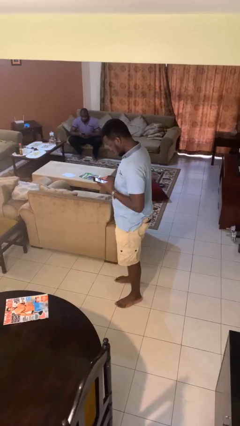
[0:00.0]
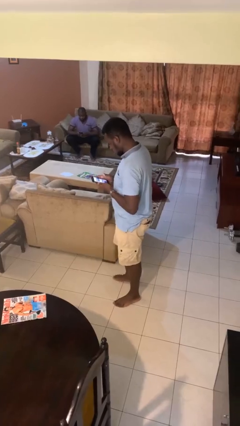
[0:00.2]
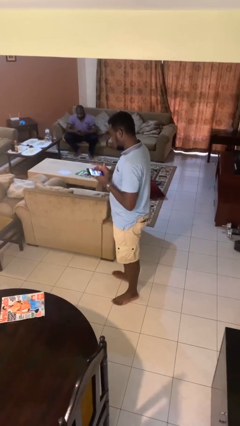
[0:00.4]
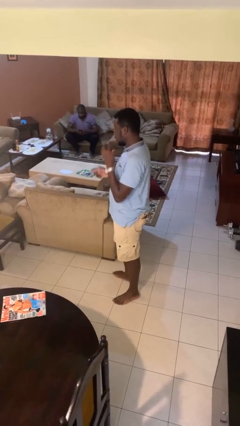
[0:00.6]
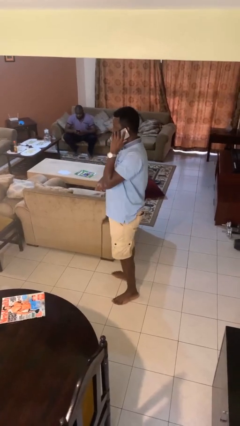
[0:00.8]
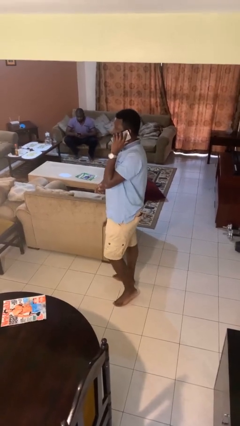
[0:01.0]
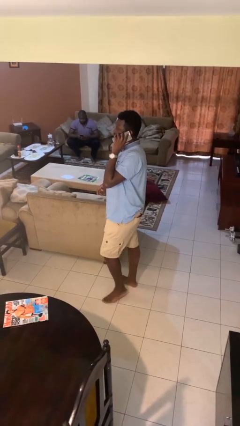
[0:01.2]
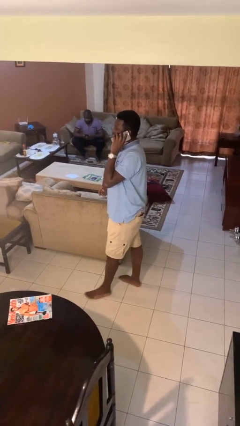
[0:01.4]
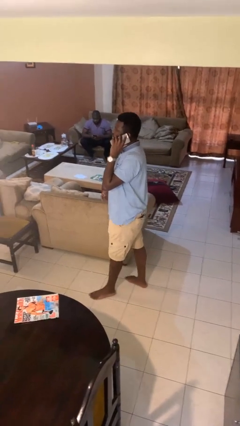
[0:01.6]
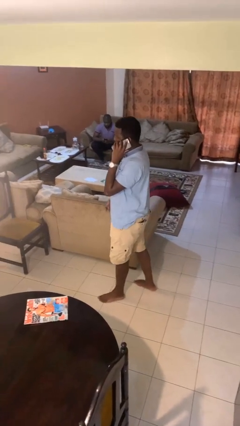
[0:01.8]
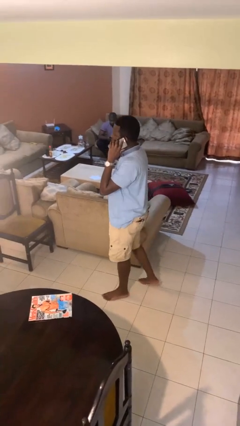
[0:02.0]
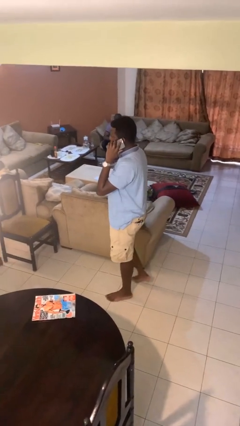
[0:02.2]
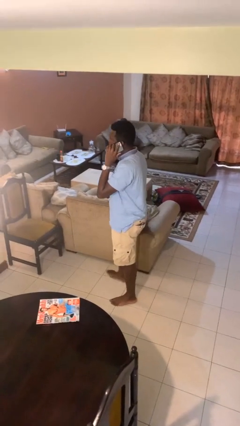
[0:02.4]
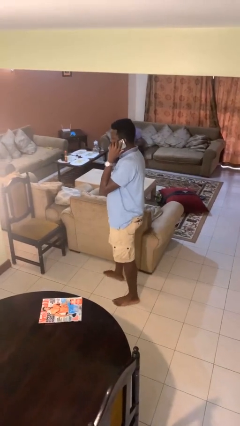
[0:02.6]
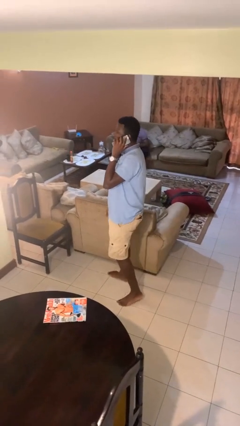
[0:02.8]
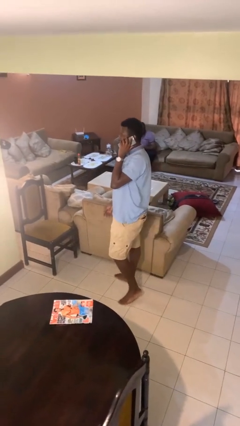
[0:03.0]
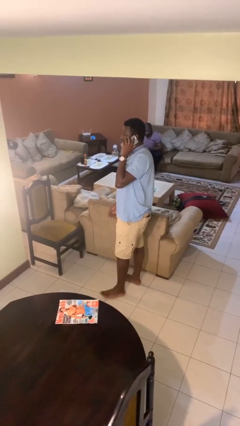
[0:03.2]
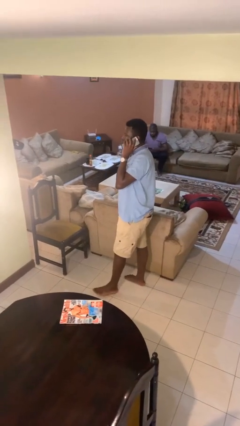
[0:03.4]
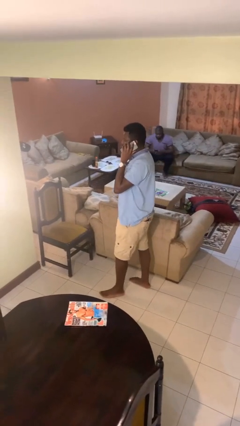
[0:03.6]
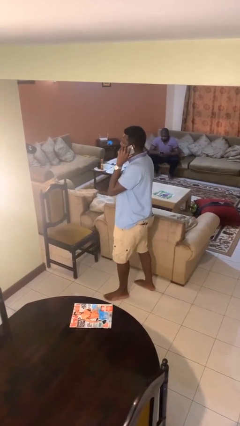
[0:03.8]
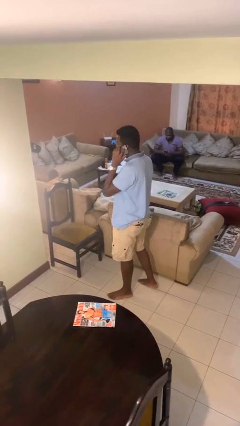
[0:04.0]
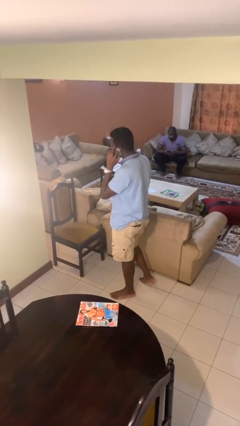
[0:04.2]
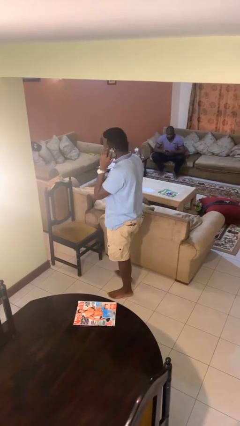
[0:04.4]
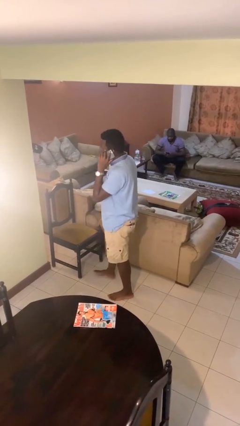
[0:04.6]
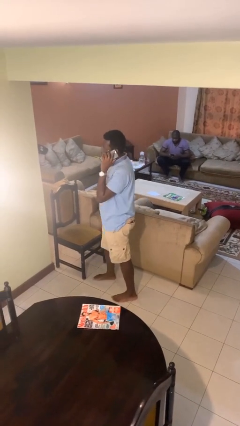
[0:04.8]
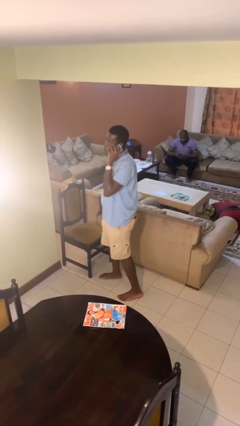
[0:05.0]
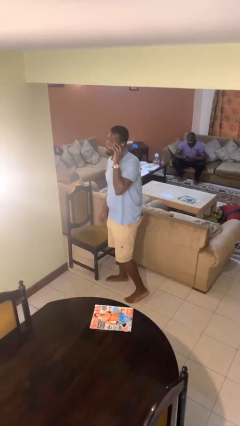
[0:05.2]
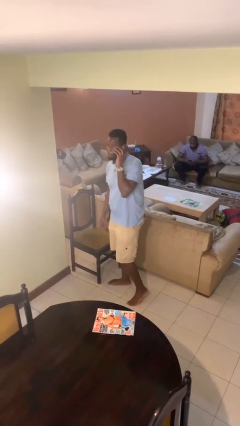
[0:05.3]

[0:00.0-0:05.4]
person talks on phone

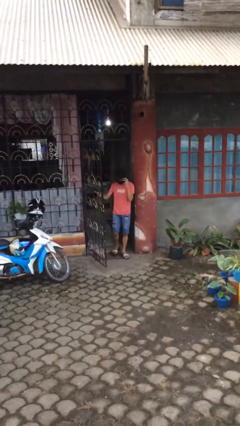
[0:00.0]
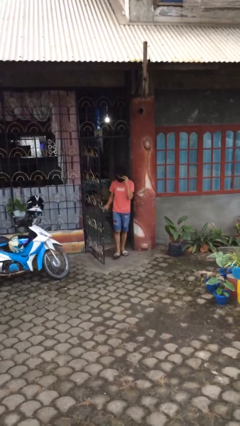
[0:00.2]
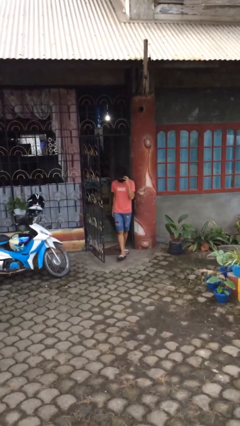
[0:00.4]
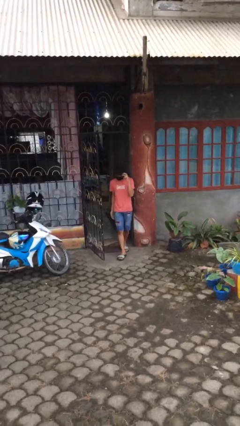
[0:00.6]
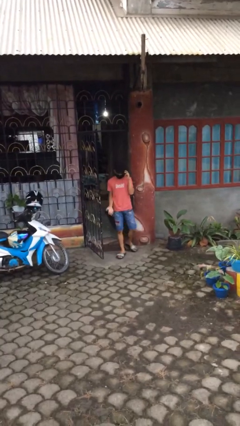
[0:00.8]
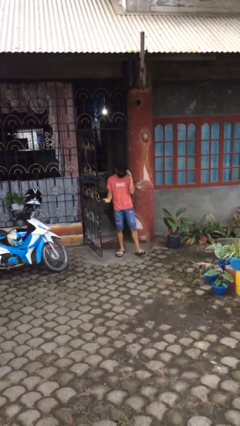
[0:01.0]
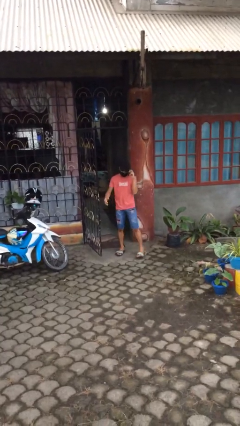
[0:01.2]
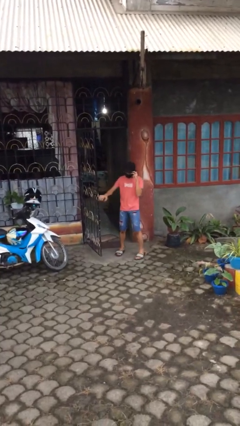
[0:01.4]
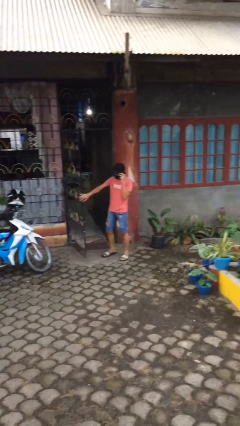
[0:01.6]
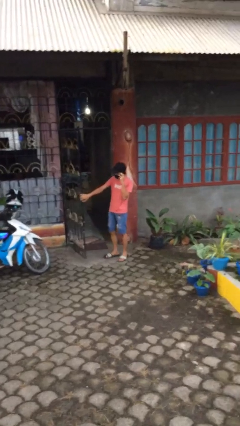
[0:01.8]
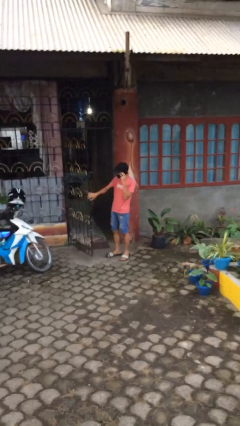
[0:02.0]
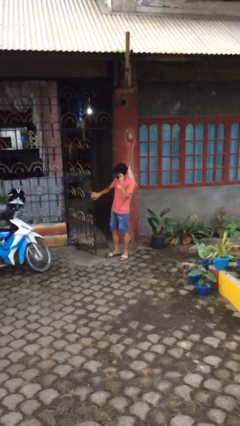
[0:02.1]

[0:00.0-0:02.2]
person enters scene through structure

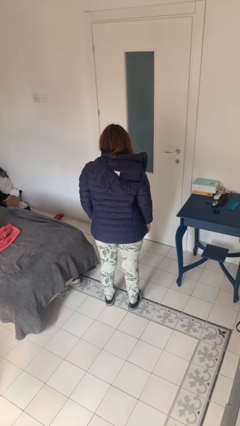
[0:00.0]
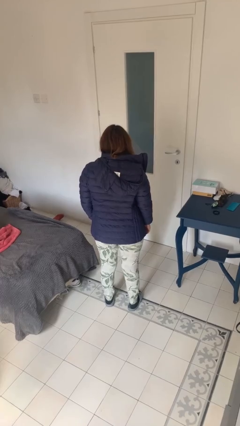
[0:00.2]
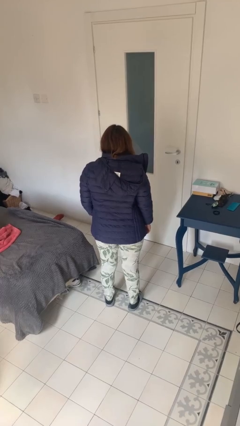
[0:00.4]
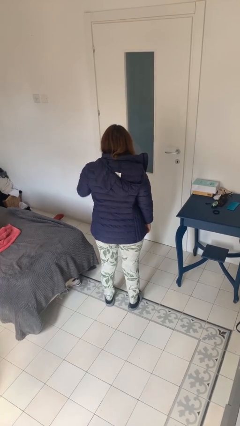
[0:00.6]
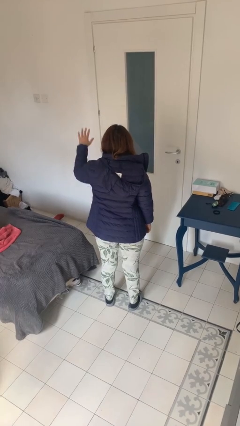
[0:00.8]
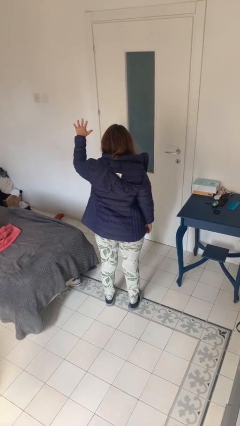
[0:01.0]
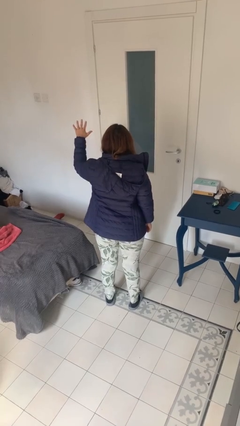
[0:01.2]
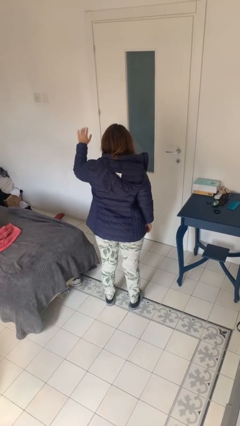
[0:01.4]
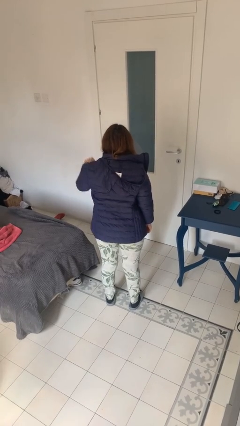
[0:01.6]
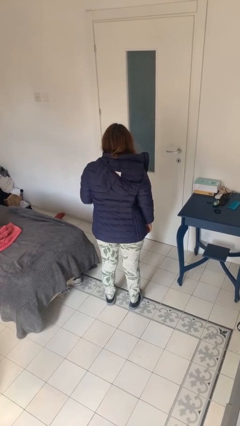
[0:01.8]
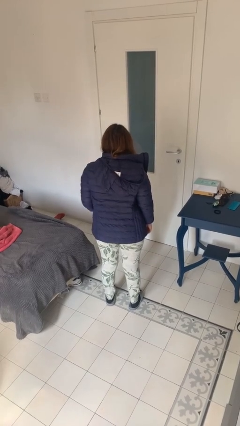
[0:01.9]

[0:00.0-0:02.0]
person gestures number five

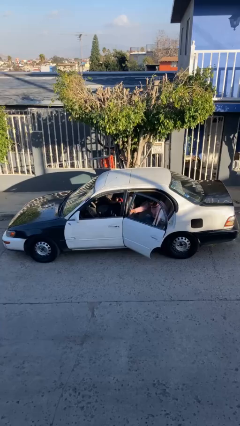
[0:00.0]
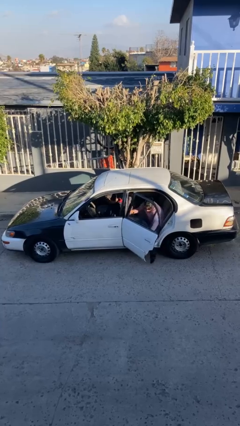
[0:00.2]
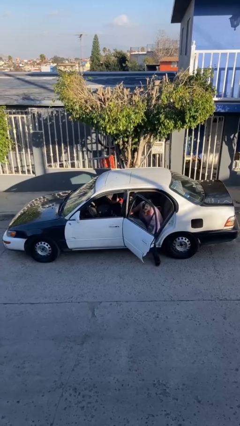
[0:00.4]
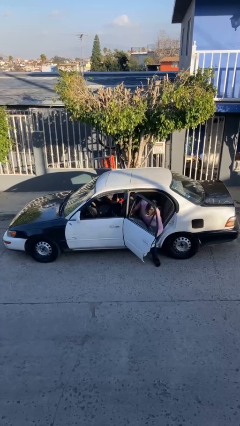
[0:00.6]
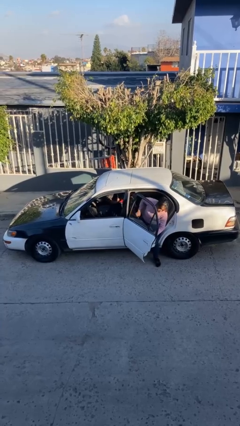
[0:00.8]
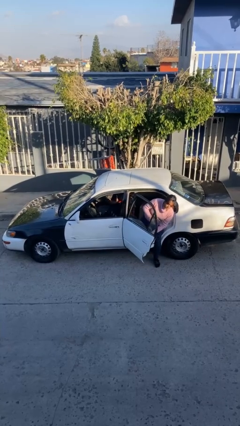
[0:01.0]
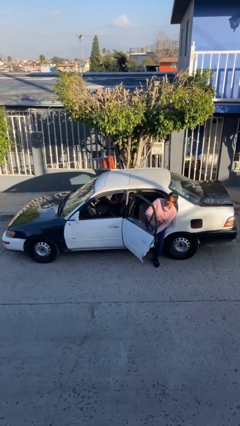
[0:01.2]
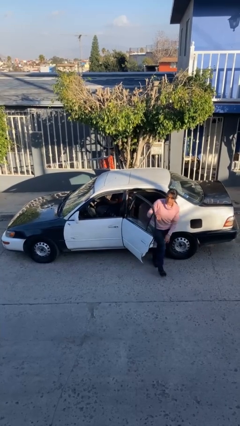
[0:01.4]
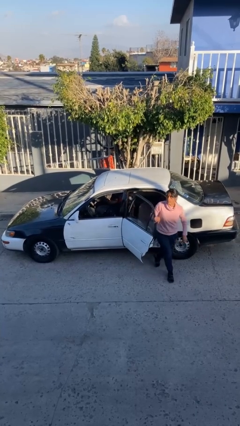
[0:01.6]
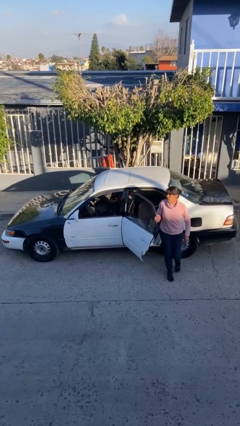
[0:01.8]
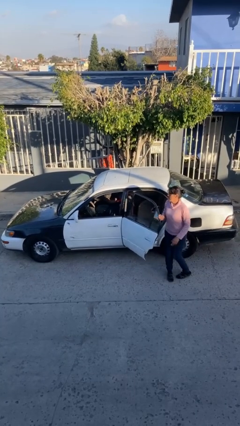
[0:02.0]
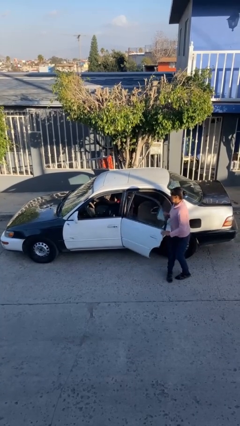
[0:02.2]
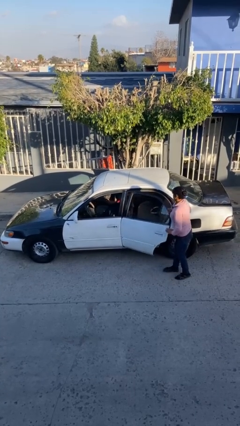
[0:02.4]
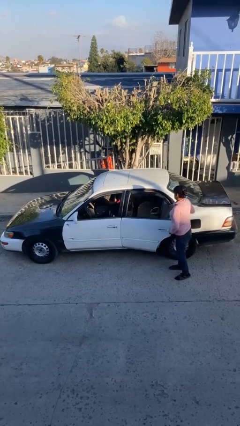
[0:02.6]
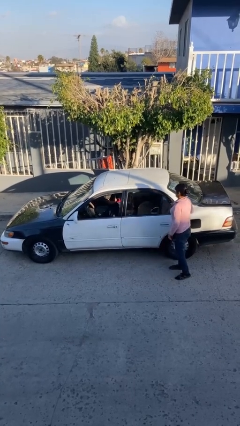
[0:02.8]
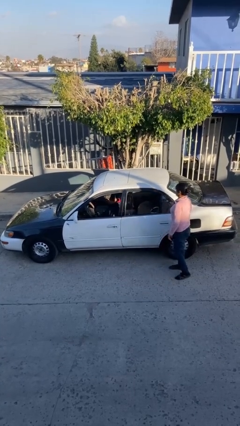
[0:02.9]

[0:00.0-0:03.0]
car drops off person

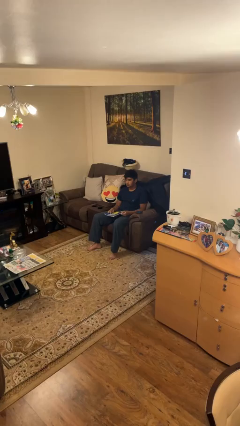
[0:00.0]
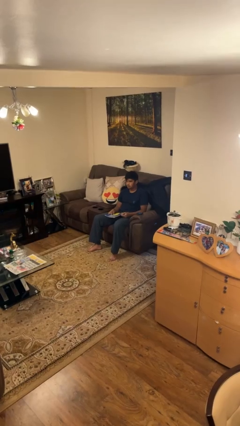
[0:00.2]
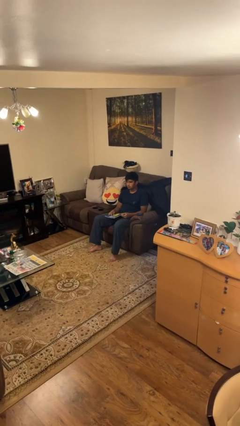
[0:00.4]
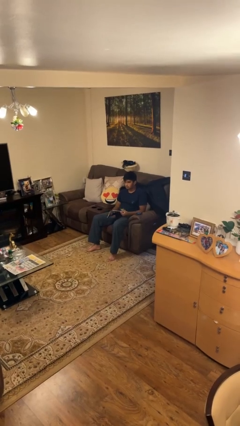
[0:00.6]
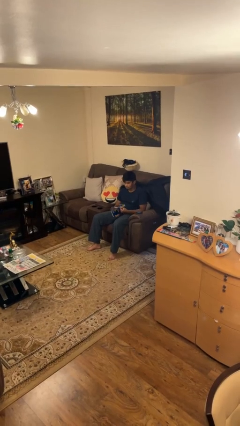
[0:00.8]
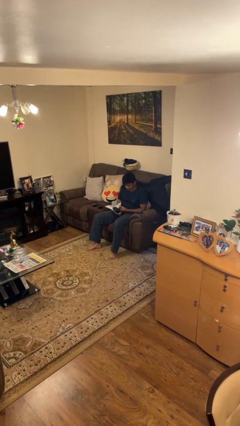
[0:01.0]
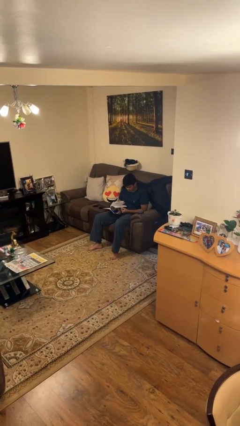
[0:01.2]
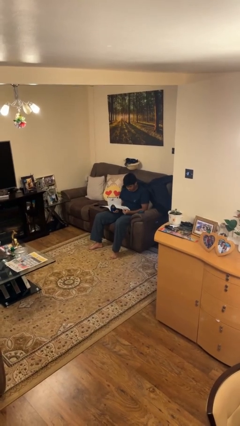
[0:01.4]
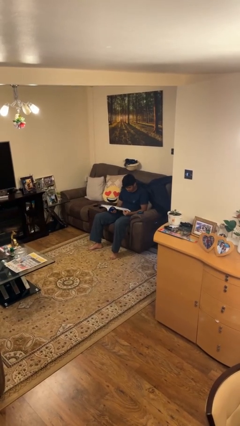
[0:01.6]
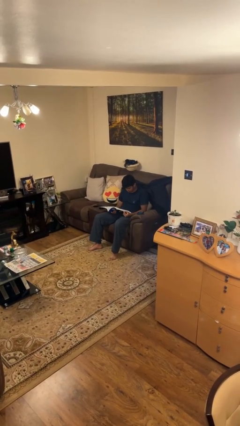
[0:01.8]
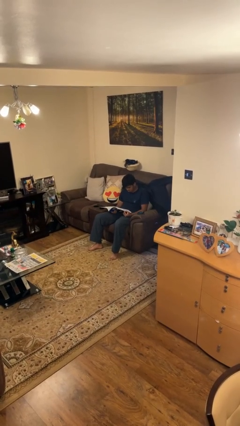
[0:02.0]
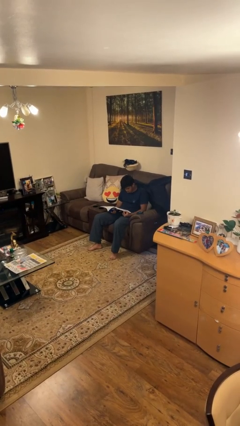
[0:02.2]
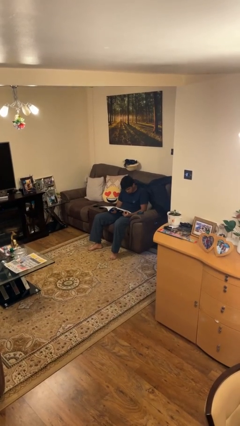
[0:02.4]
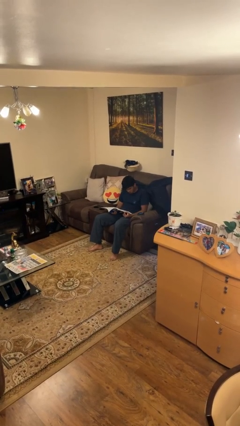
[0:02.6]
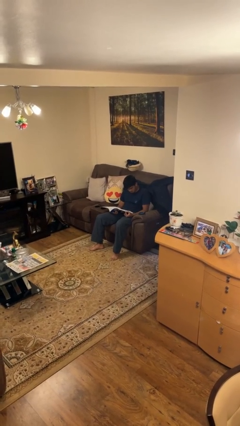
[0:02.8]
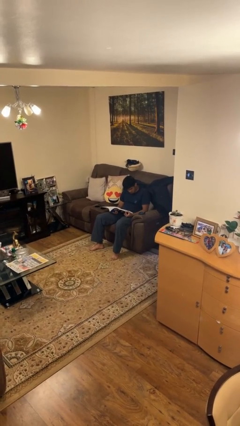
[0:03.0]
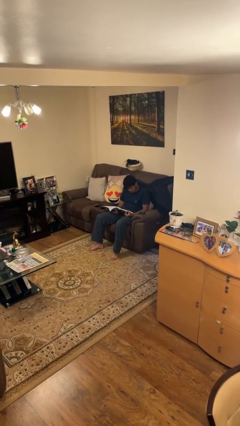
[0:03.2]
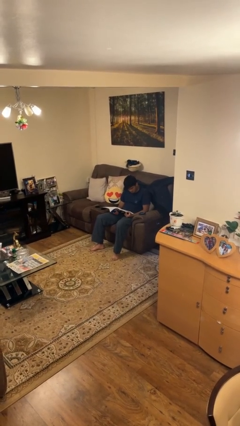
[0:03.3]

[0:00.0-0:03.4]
person reads magazine

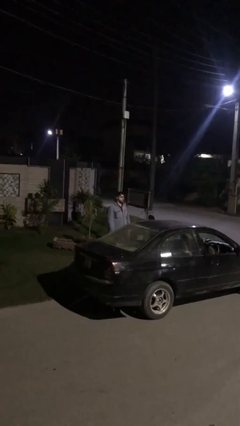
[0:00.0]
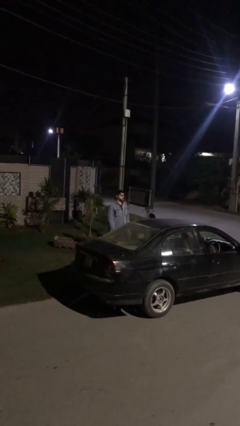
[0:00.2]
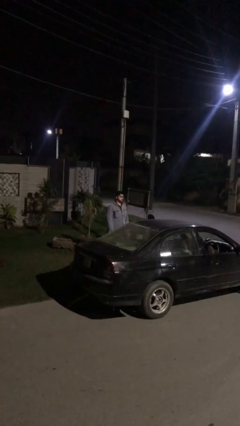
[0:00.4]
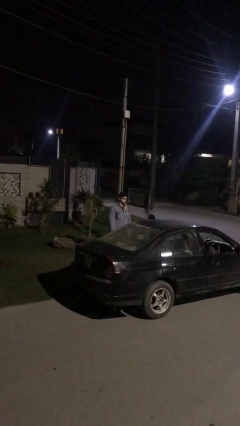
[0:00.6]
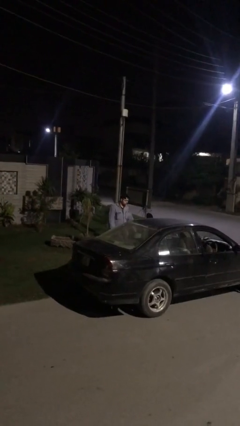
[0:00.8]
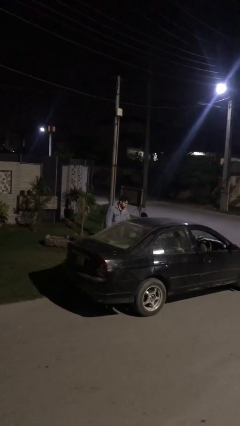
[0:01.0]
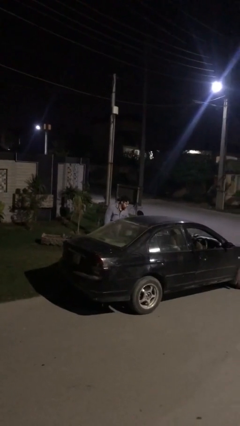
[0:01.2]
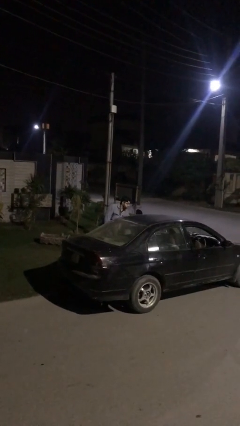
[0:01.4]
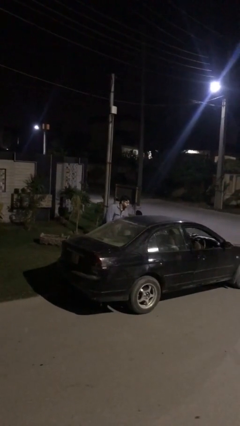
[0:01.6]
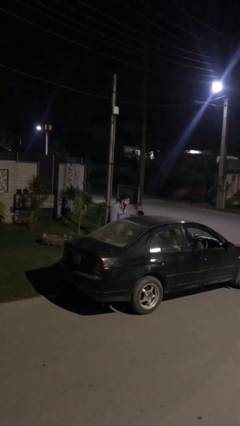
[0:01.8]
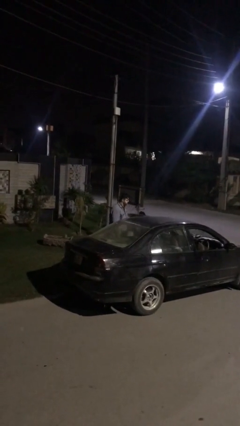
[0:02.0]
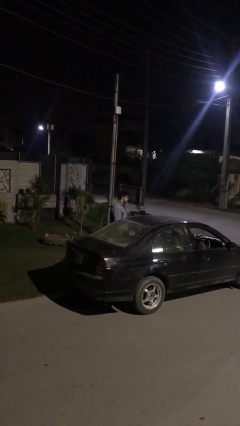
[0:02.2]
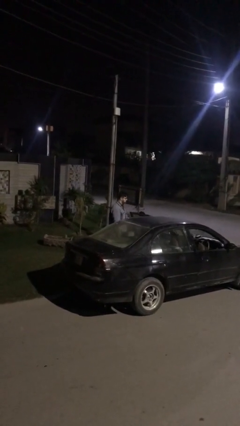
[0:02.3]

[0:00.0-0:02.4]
person opens car door
